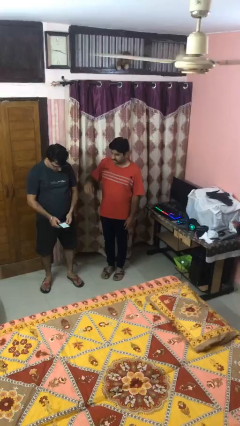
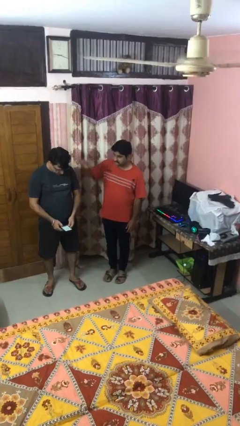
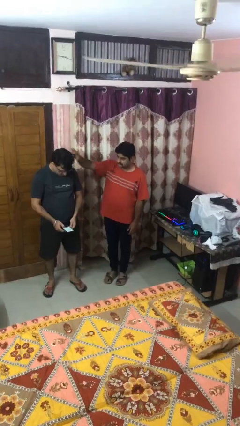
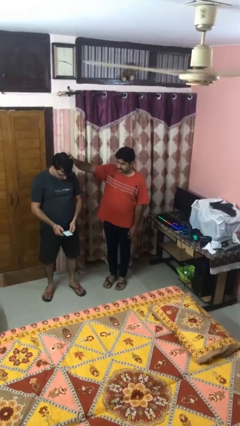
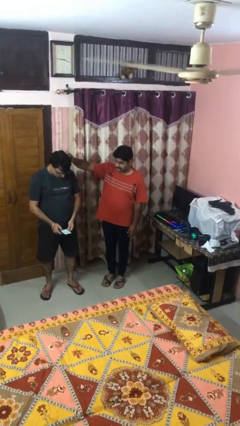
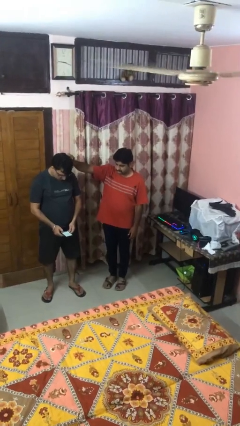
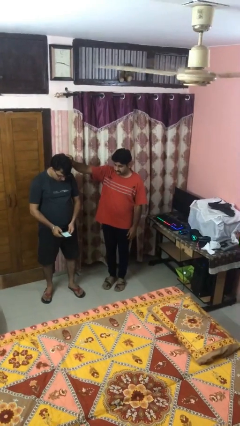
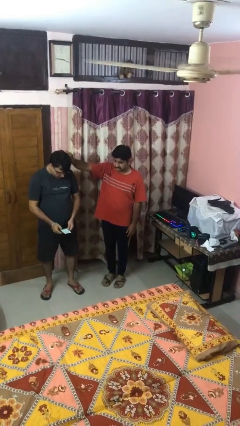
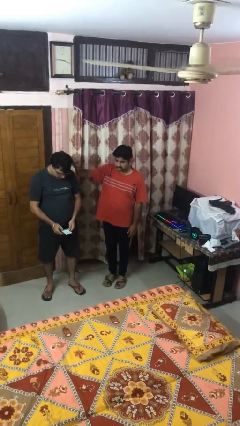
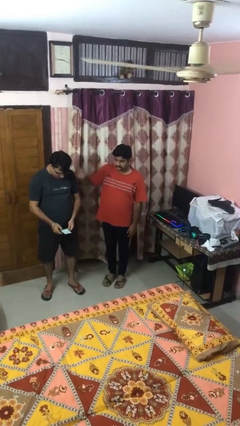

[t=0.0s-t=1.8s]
person grabs person by hair

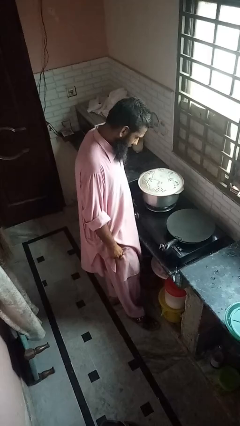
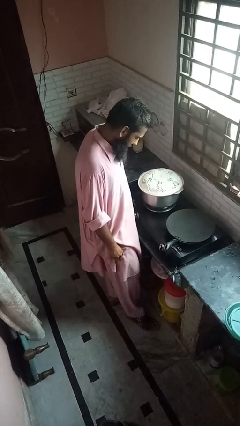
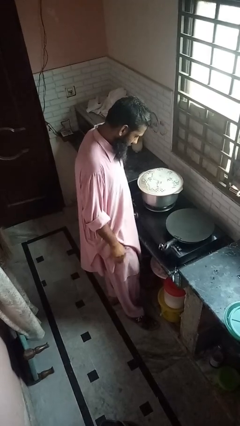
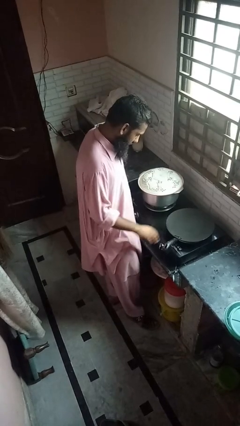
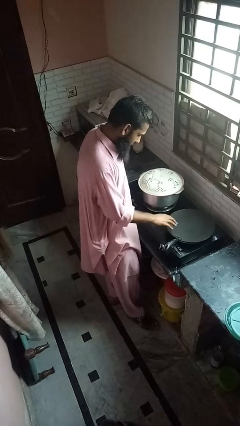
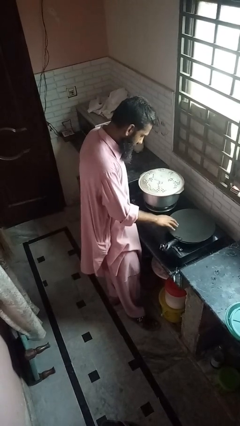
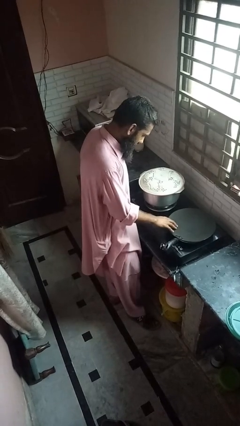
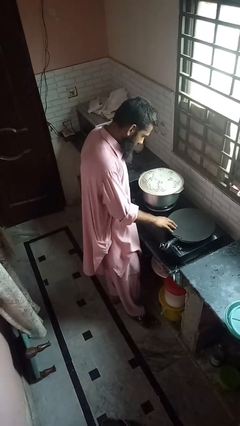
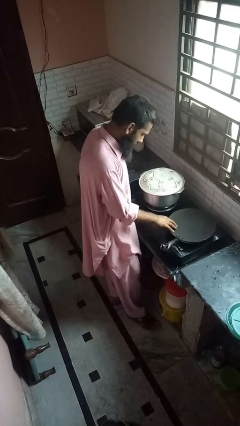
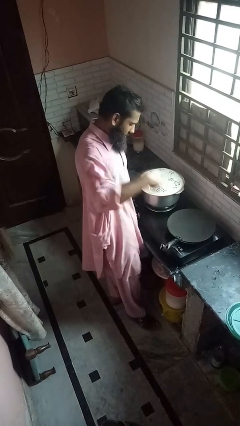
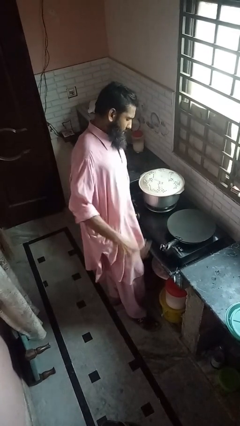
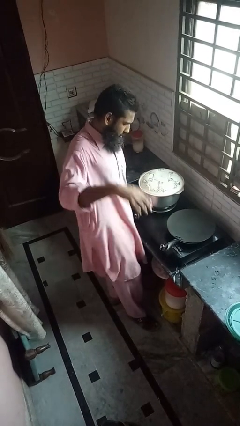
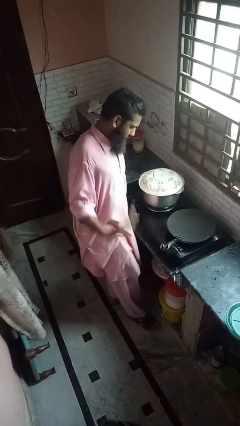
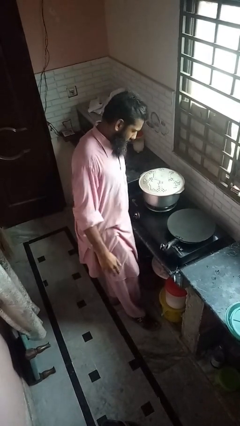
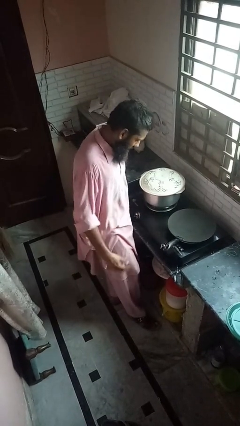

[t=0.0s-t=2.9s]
person burns hand

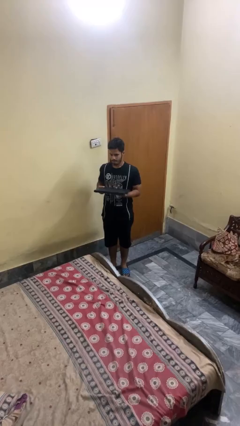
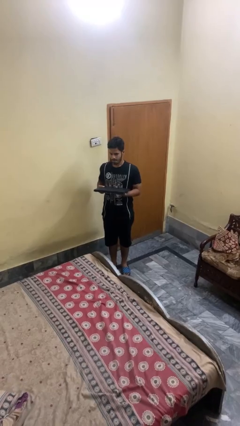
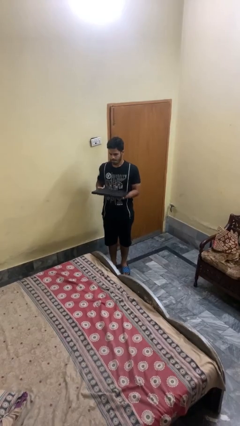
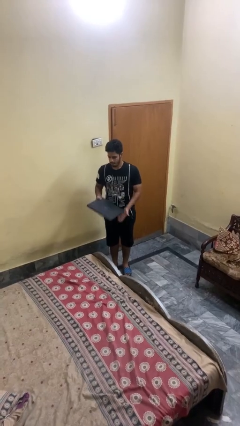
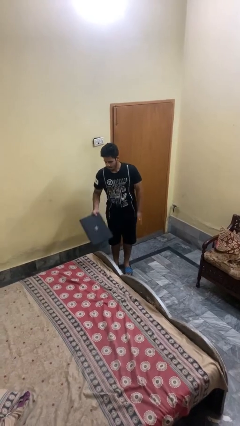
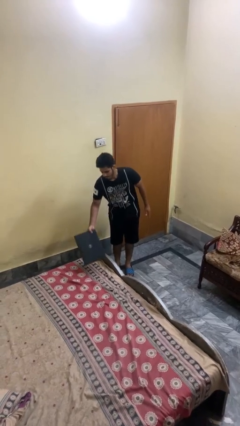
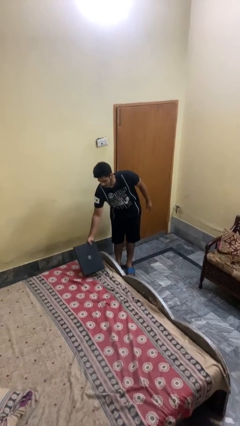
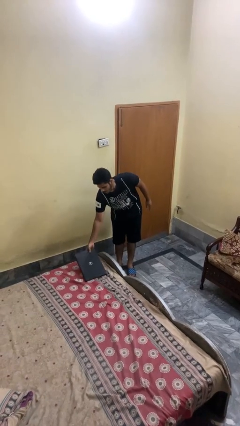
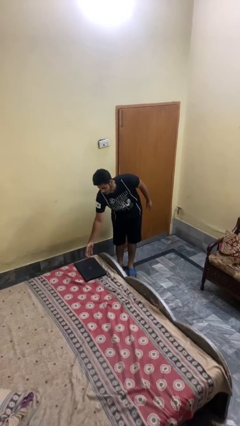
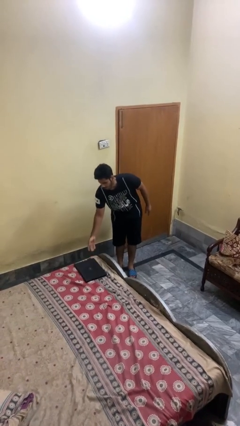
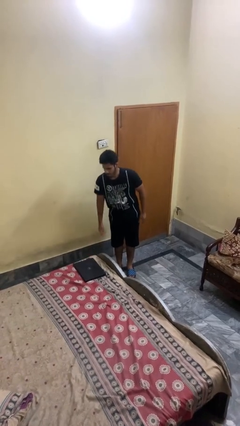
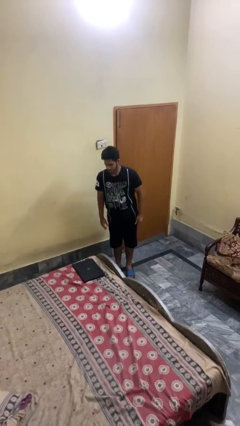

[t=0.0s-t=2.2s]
person puts down object on bed

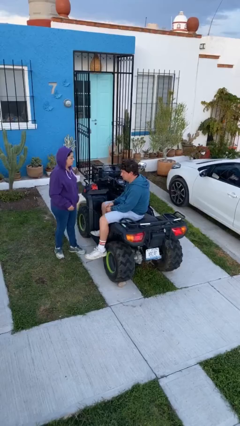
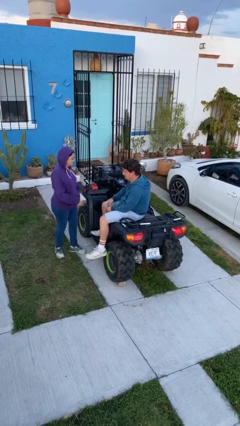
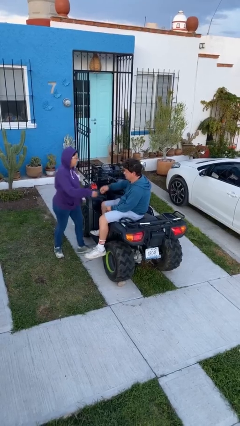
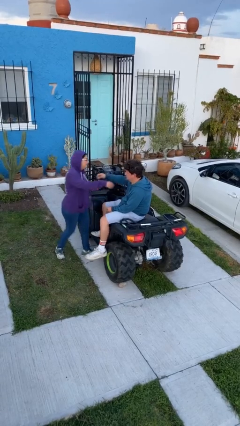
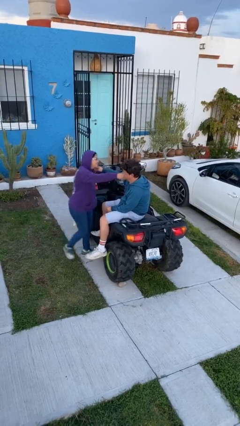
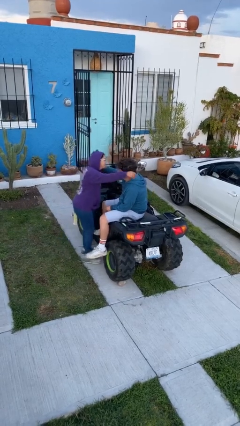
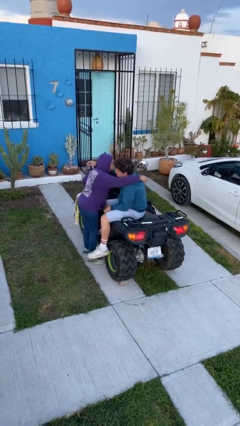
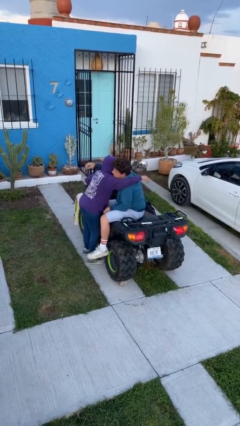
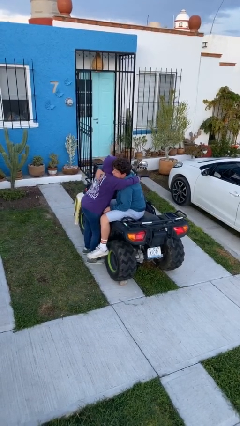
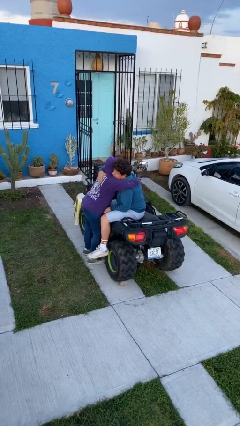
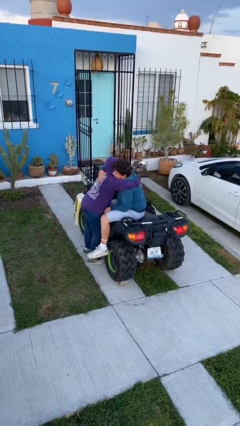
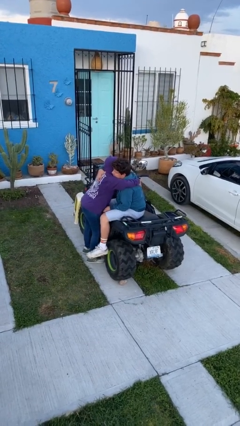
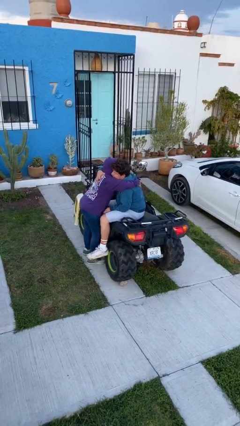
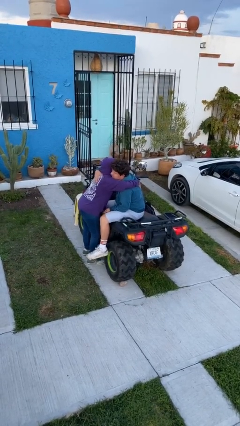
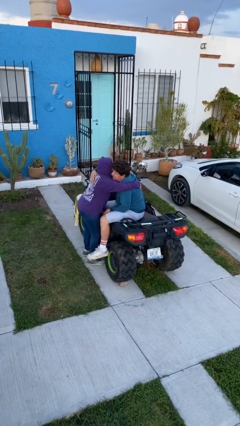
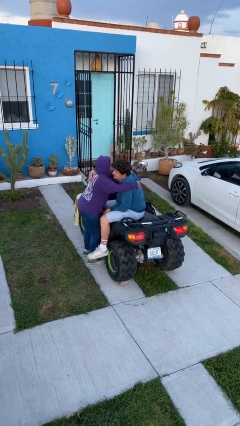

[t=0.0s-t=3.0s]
person embraces person

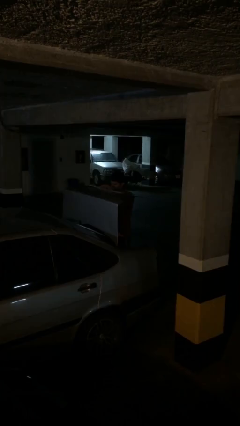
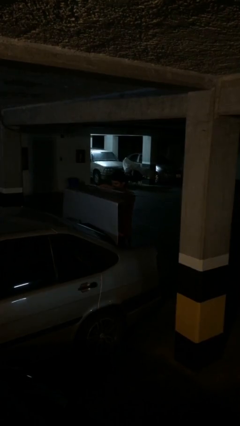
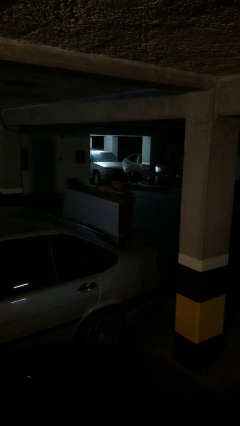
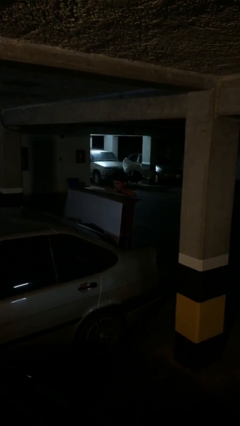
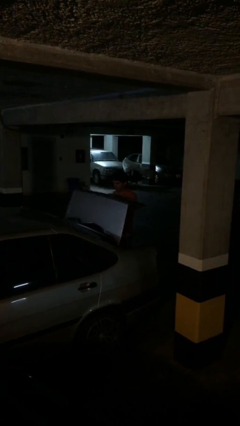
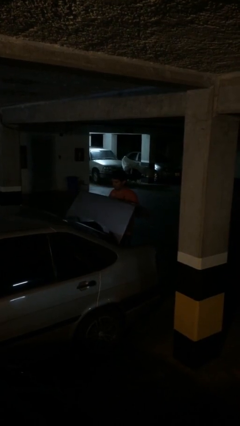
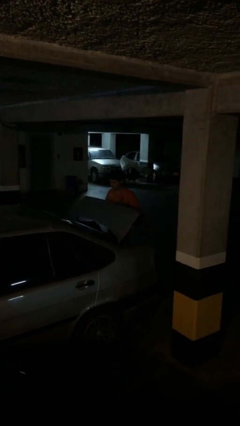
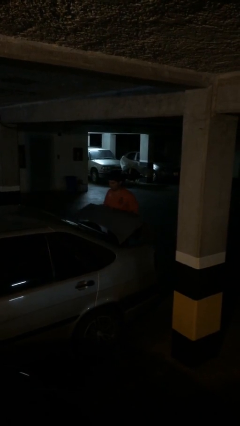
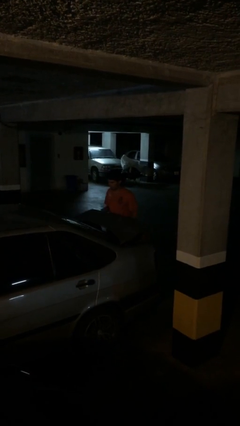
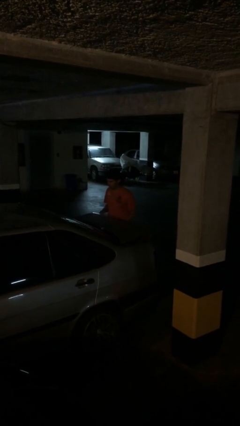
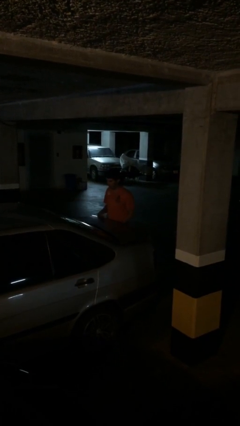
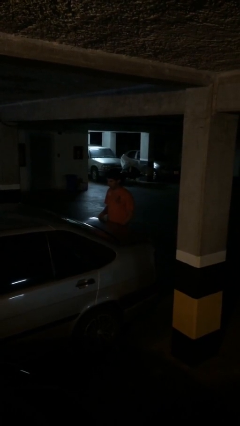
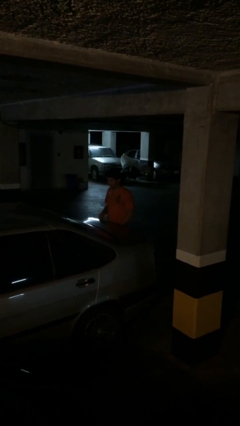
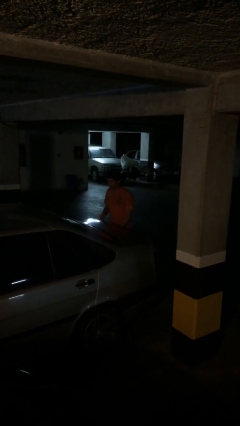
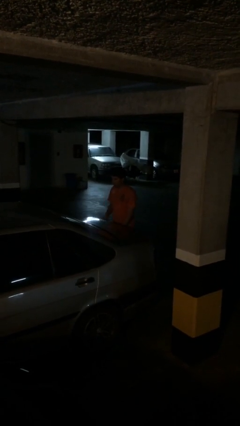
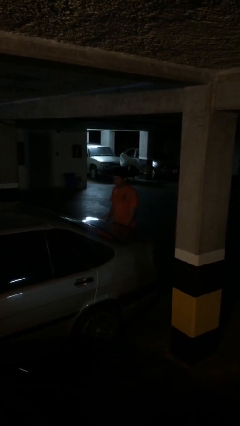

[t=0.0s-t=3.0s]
person closes car trunk

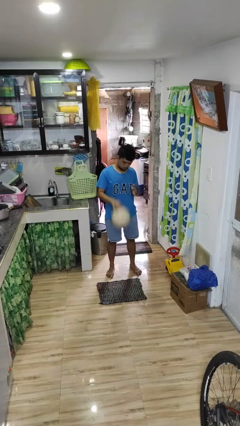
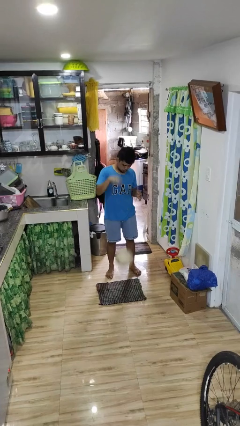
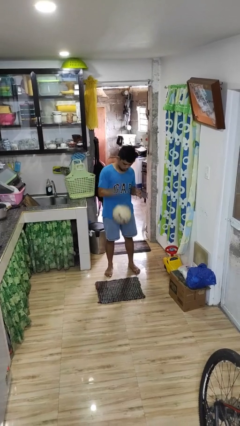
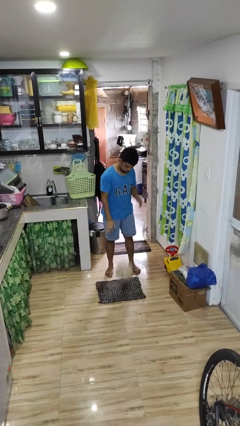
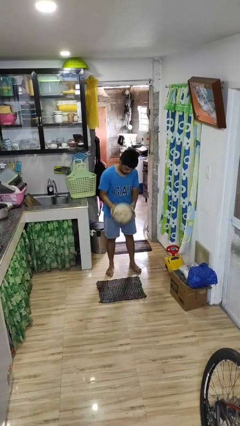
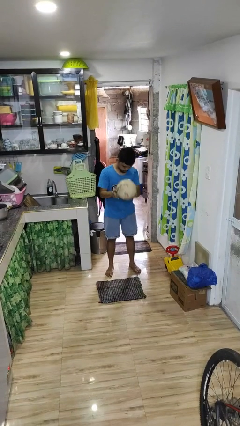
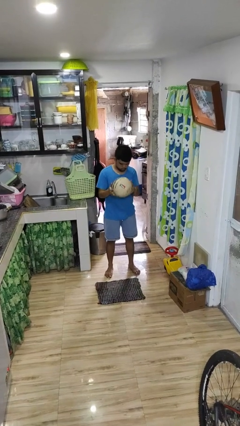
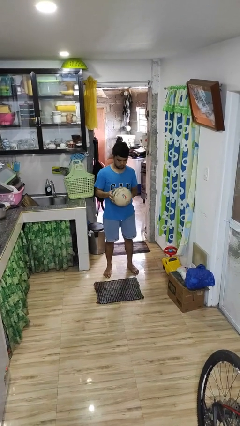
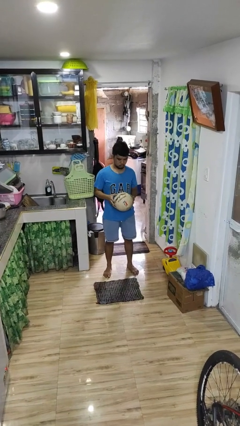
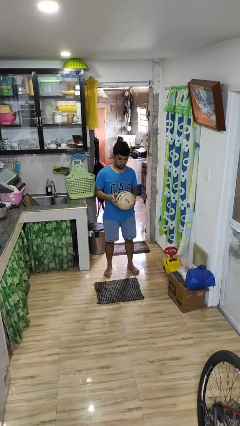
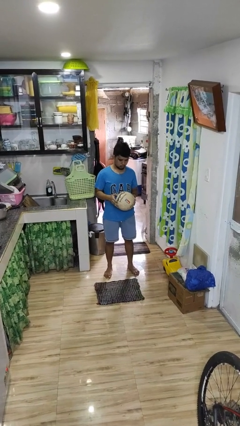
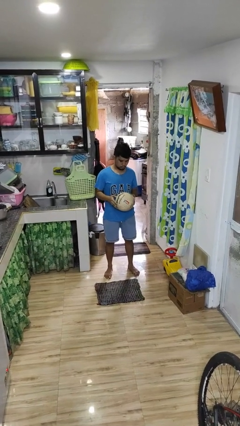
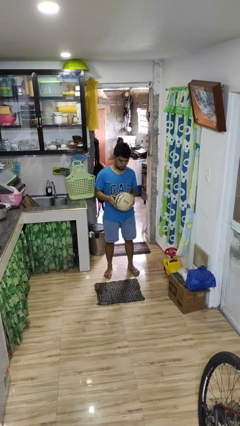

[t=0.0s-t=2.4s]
person bounces ball on floor

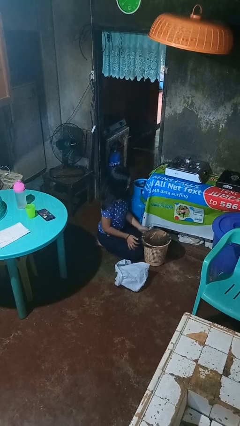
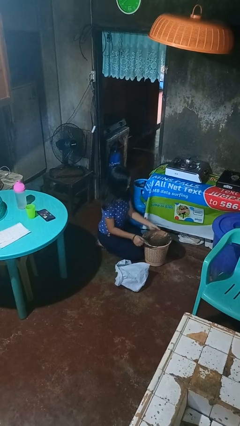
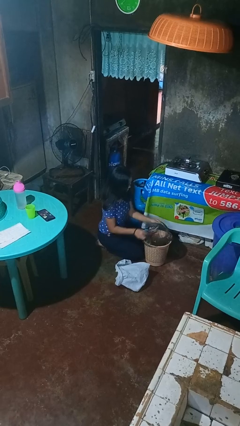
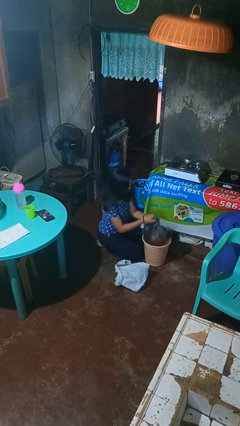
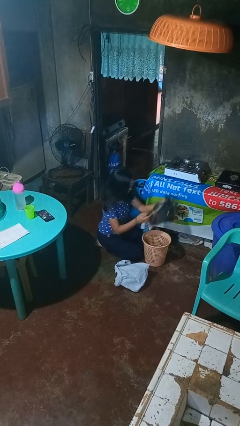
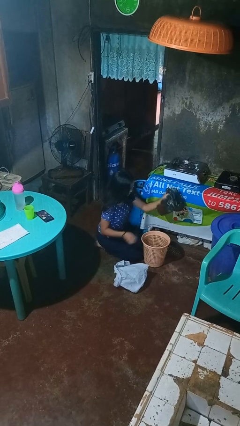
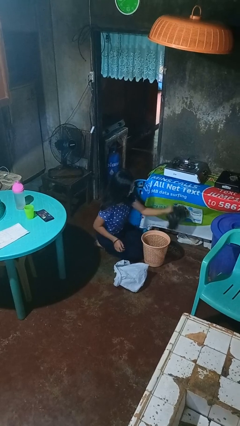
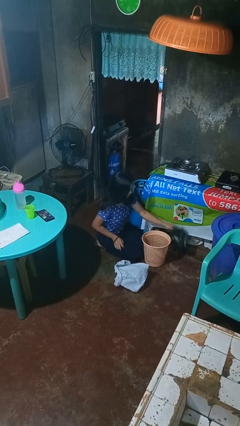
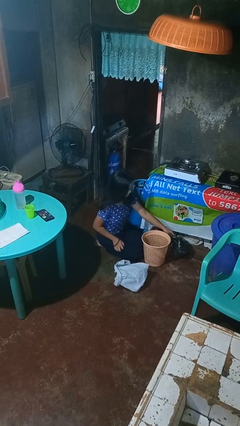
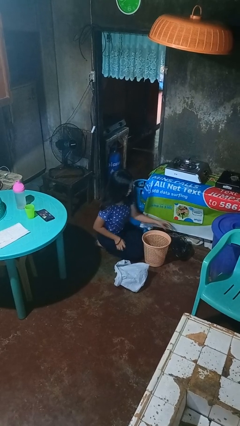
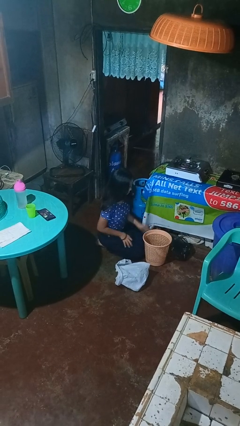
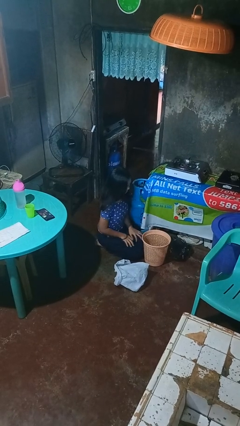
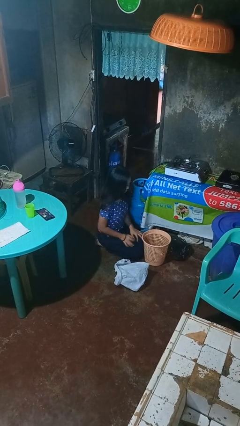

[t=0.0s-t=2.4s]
person removes trashbag from trashcan
